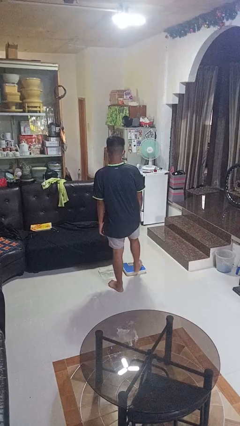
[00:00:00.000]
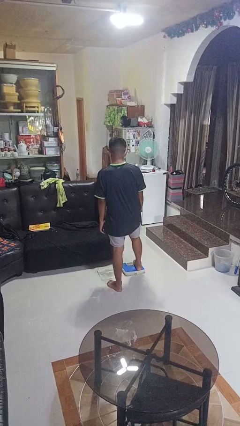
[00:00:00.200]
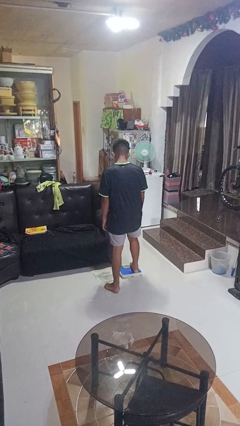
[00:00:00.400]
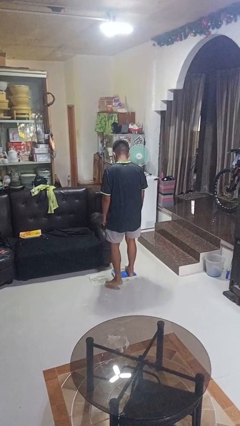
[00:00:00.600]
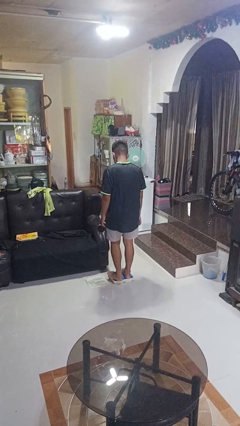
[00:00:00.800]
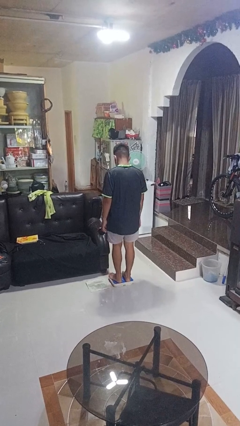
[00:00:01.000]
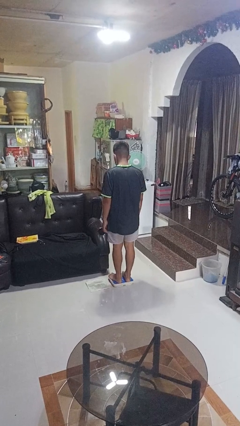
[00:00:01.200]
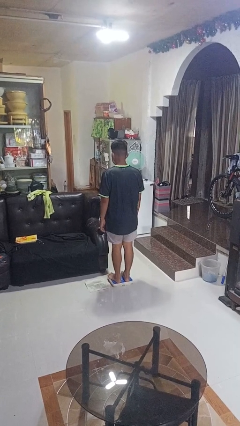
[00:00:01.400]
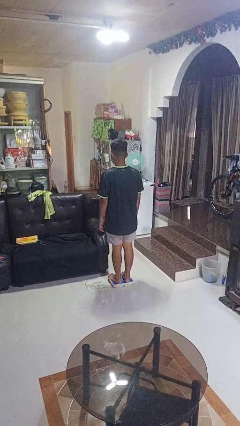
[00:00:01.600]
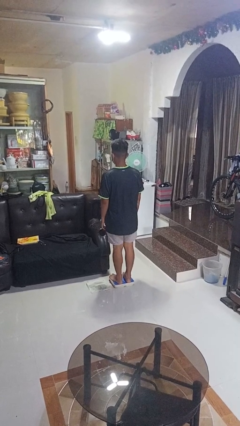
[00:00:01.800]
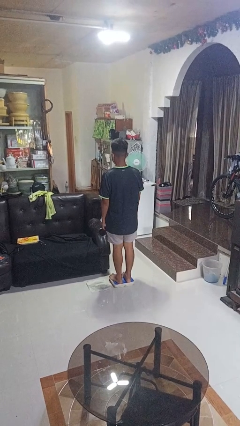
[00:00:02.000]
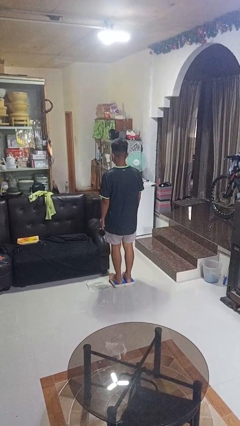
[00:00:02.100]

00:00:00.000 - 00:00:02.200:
person uses bodyweight scale

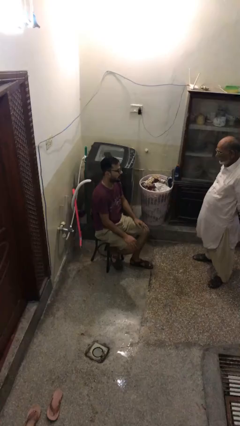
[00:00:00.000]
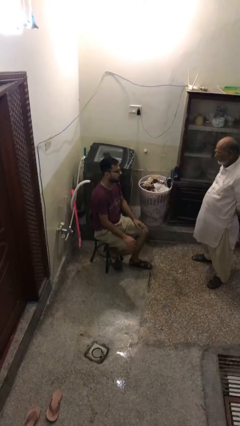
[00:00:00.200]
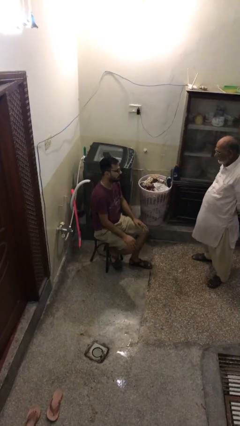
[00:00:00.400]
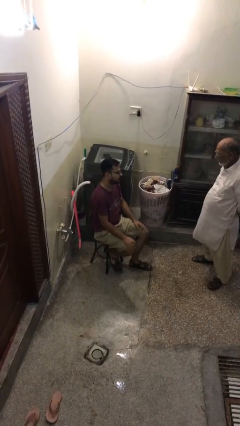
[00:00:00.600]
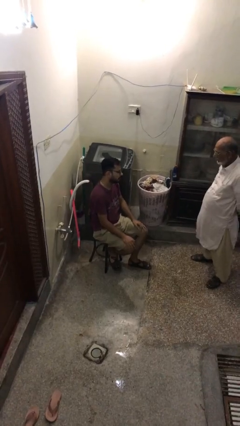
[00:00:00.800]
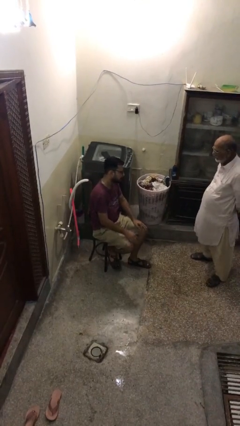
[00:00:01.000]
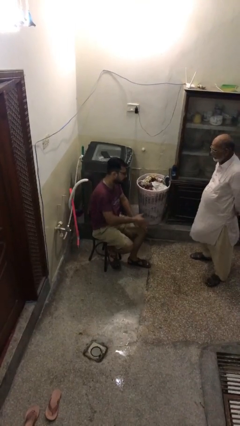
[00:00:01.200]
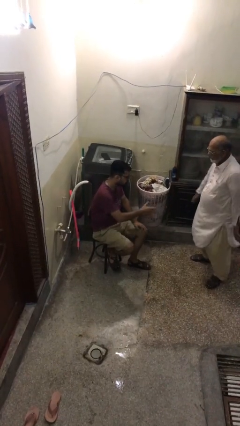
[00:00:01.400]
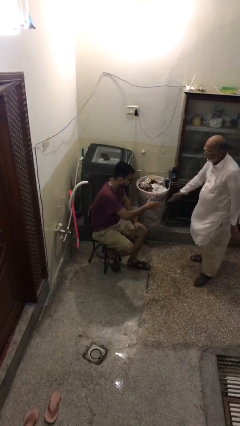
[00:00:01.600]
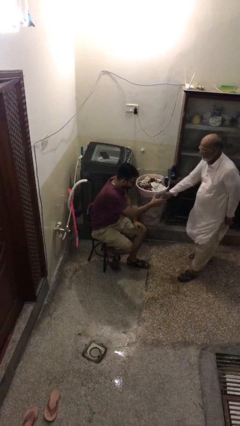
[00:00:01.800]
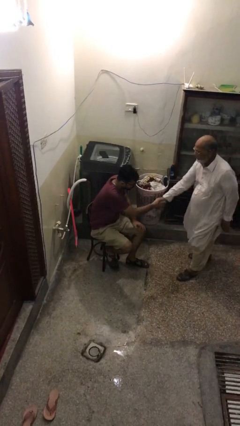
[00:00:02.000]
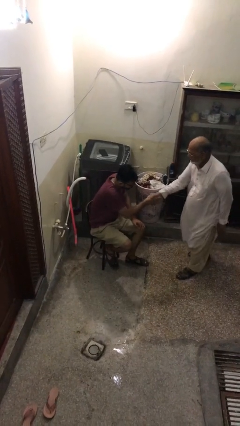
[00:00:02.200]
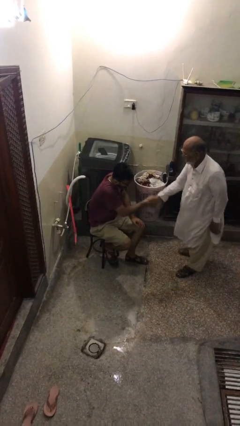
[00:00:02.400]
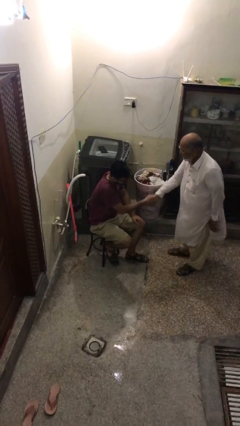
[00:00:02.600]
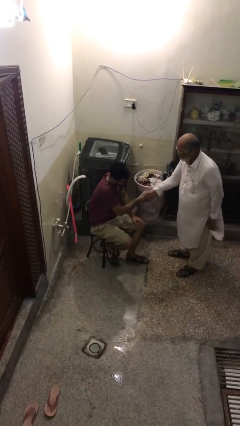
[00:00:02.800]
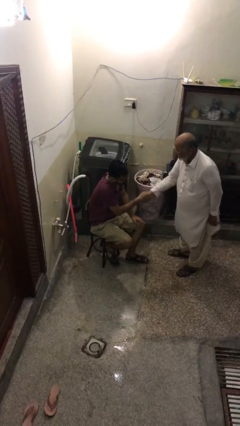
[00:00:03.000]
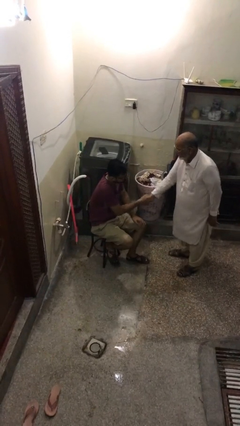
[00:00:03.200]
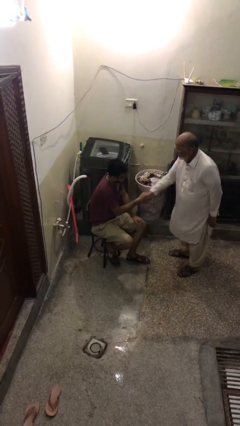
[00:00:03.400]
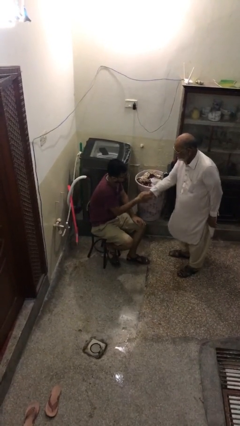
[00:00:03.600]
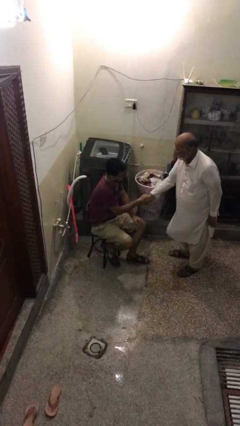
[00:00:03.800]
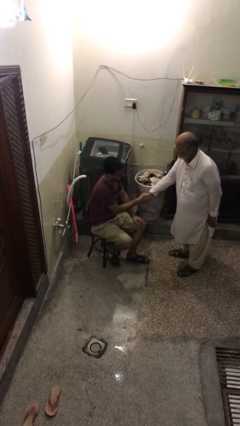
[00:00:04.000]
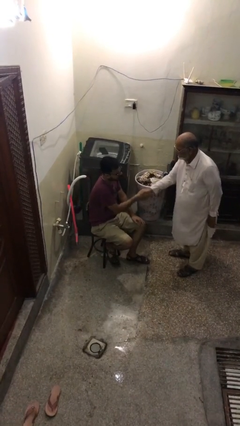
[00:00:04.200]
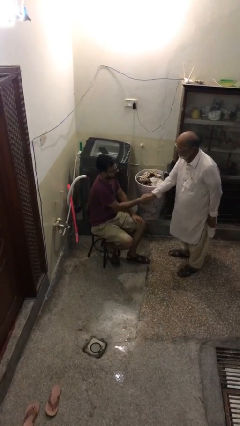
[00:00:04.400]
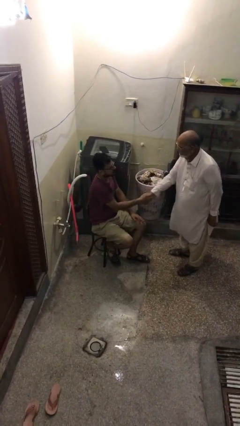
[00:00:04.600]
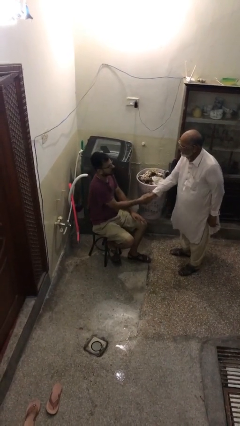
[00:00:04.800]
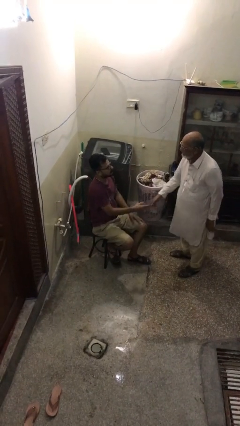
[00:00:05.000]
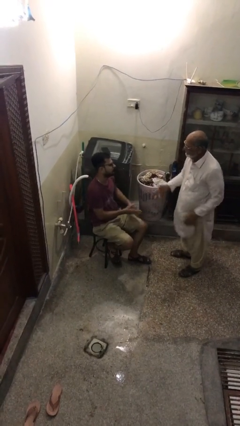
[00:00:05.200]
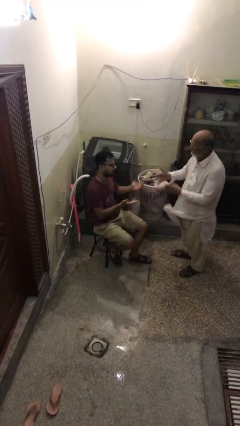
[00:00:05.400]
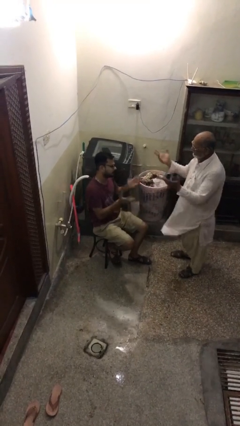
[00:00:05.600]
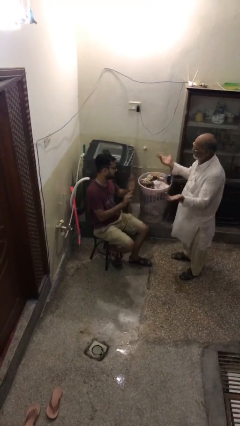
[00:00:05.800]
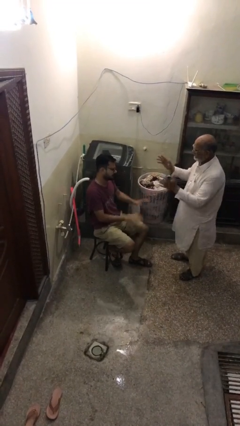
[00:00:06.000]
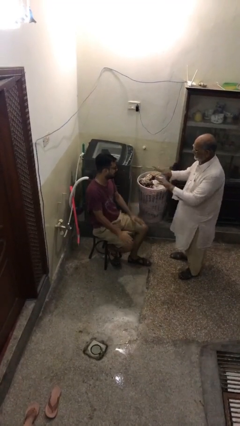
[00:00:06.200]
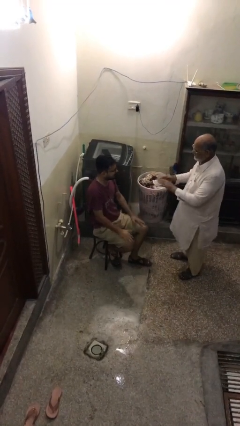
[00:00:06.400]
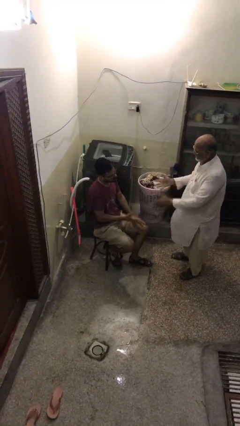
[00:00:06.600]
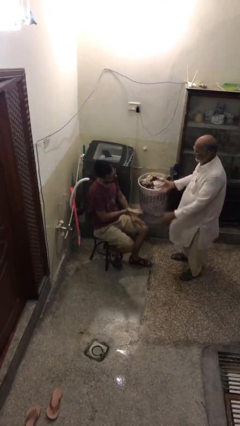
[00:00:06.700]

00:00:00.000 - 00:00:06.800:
person shakes hand

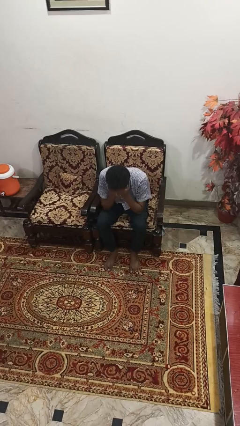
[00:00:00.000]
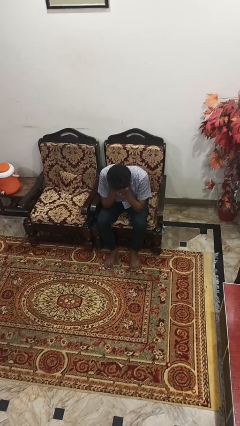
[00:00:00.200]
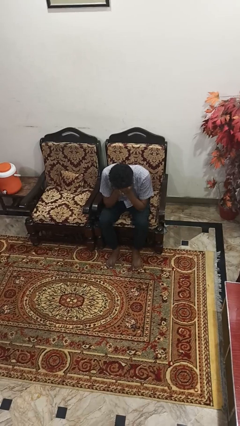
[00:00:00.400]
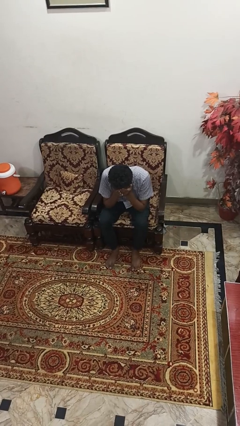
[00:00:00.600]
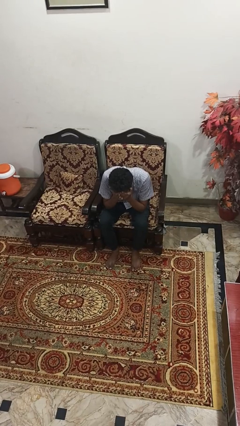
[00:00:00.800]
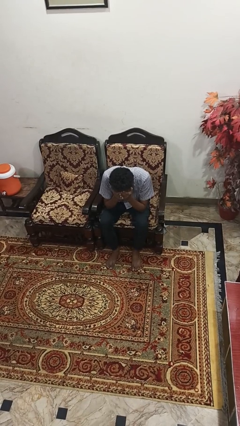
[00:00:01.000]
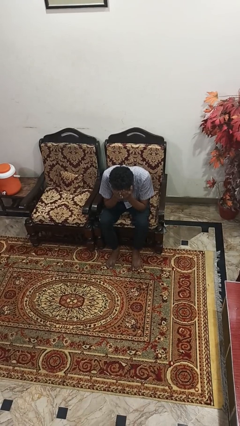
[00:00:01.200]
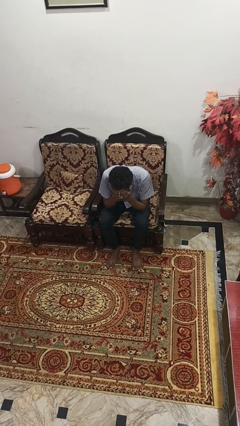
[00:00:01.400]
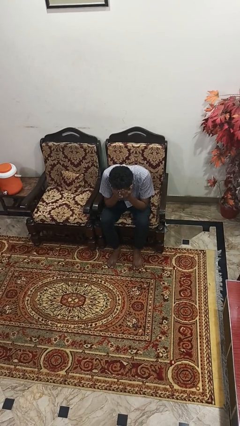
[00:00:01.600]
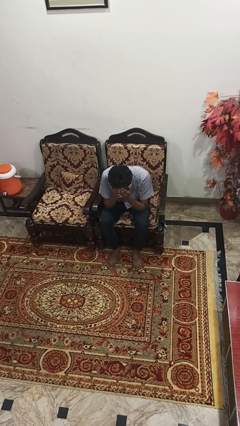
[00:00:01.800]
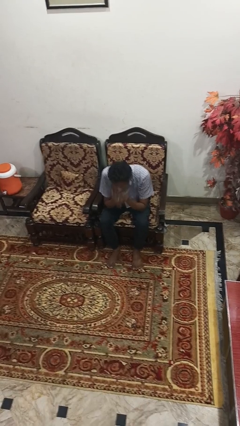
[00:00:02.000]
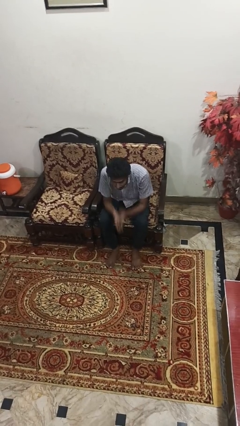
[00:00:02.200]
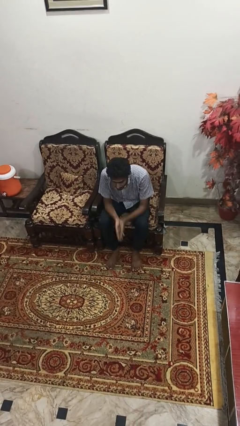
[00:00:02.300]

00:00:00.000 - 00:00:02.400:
person covers face with hands

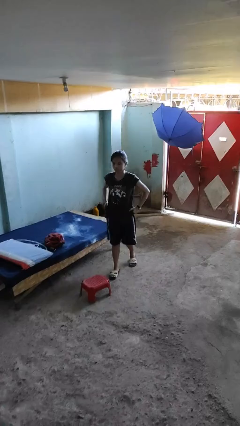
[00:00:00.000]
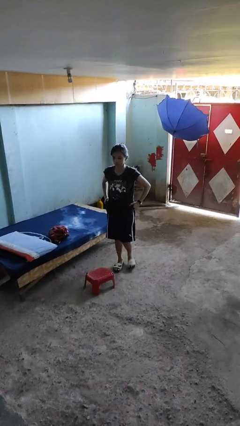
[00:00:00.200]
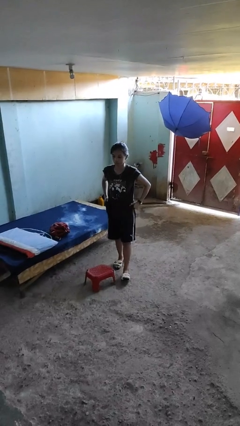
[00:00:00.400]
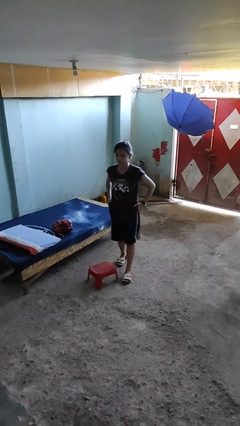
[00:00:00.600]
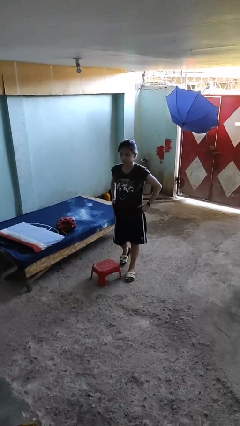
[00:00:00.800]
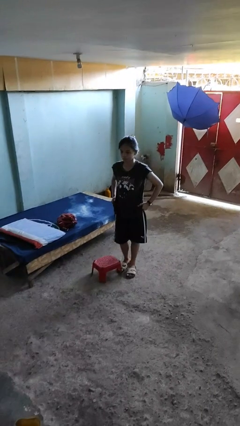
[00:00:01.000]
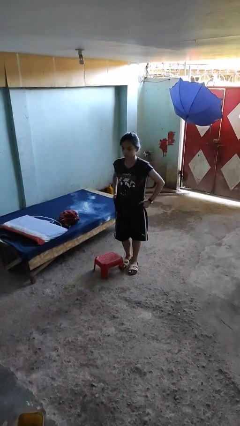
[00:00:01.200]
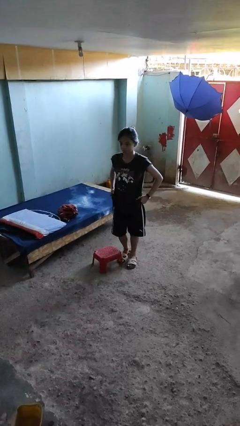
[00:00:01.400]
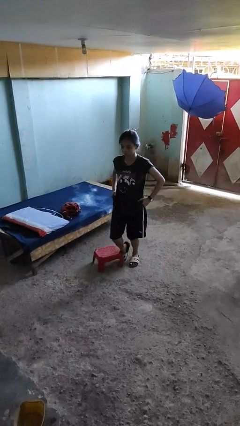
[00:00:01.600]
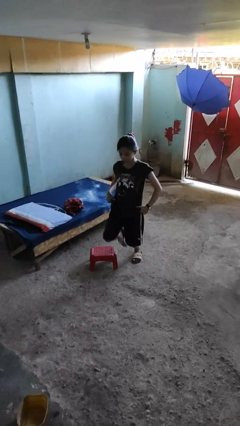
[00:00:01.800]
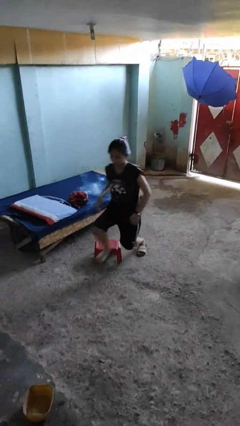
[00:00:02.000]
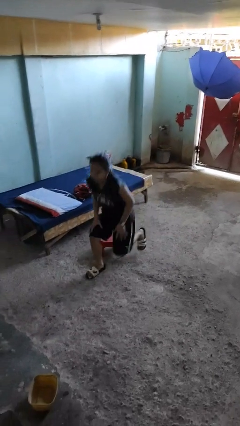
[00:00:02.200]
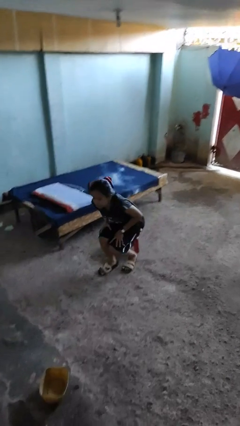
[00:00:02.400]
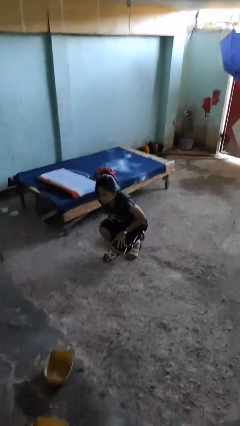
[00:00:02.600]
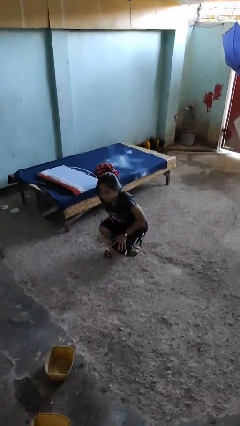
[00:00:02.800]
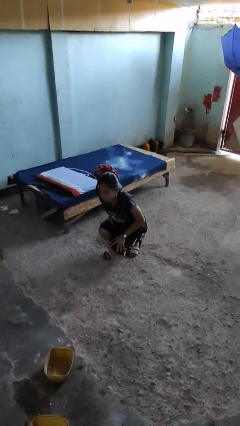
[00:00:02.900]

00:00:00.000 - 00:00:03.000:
person trips on object on floor

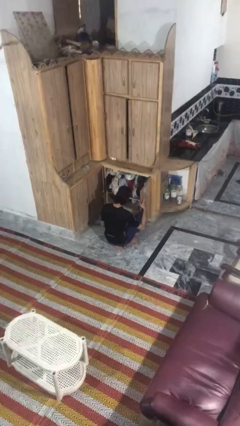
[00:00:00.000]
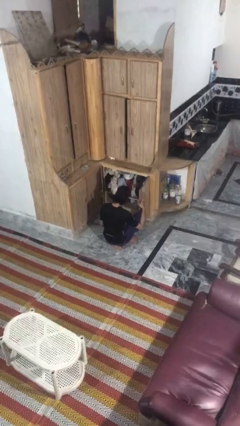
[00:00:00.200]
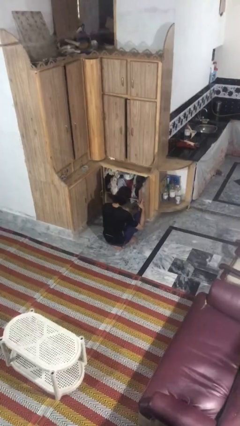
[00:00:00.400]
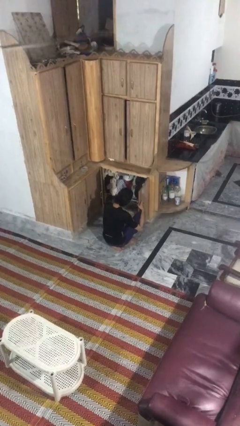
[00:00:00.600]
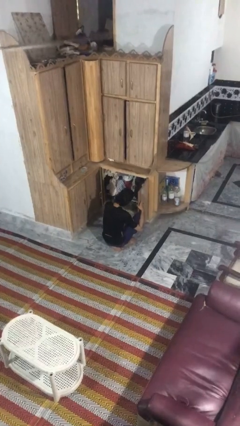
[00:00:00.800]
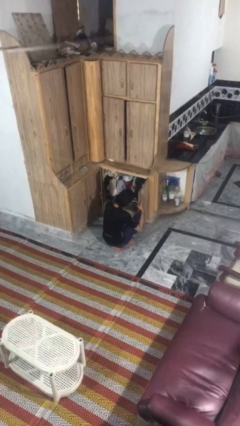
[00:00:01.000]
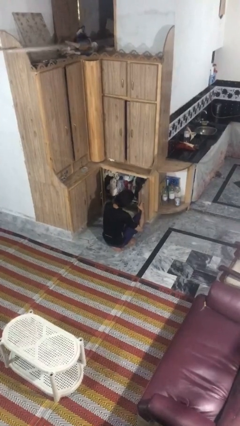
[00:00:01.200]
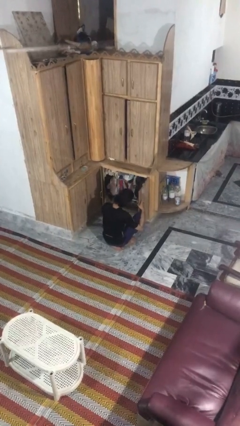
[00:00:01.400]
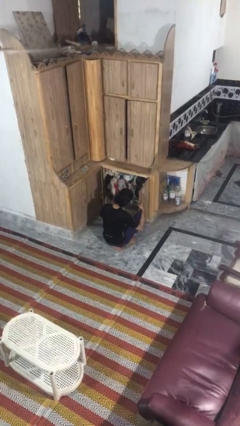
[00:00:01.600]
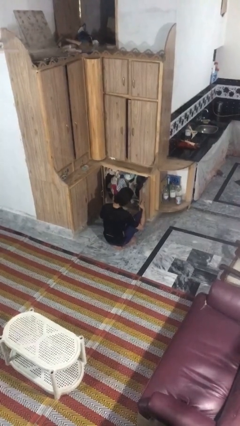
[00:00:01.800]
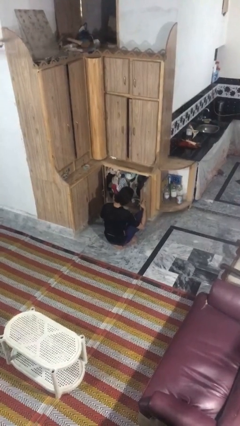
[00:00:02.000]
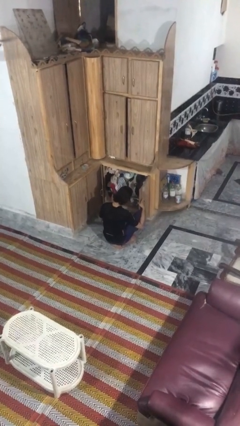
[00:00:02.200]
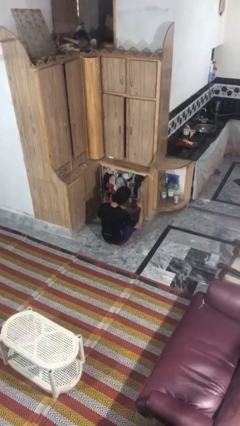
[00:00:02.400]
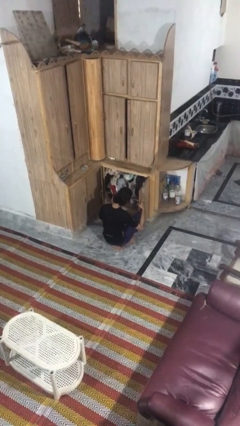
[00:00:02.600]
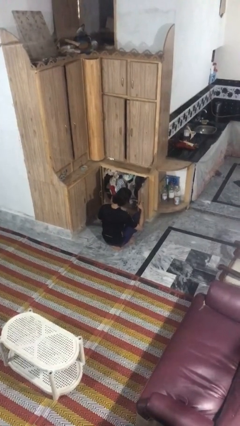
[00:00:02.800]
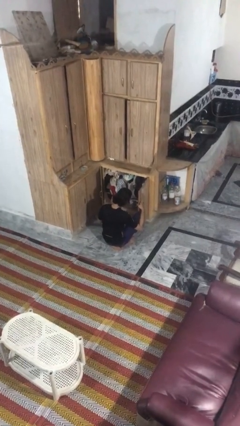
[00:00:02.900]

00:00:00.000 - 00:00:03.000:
person picks up object from cabinet
